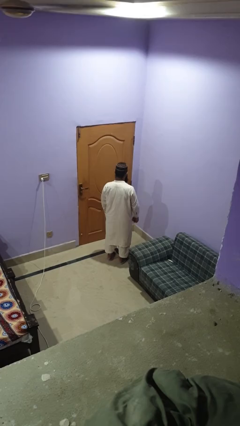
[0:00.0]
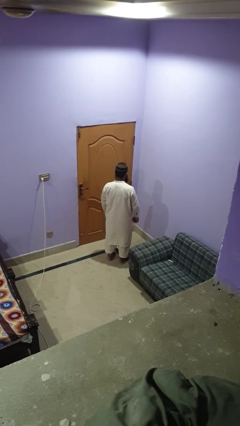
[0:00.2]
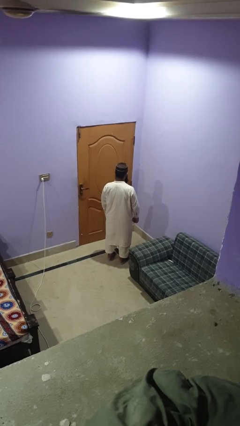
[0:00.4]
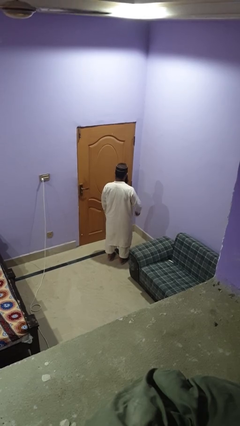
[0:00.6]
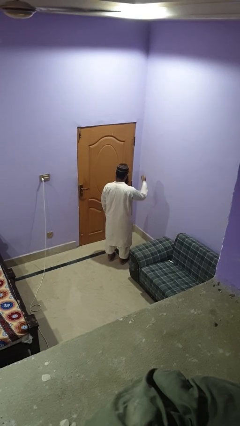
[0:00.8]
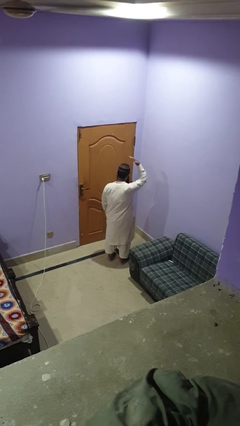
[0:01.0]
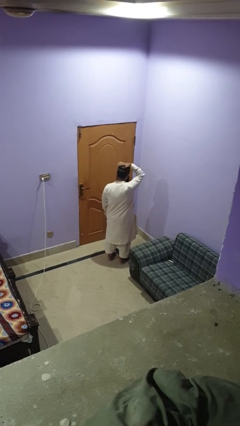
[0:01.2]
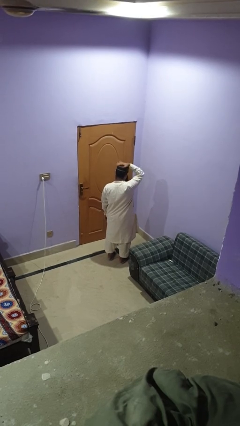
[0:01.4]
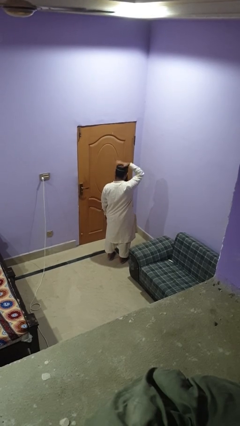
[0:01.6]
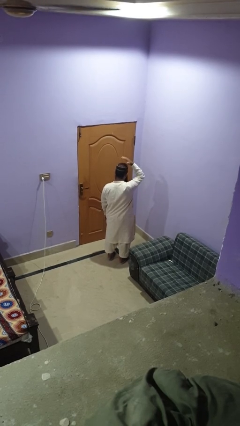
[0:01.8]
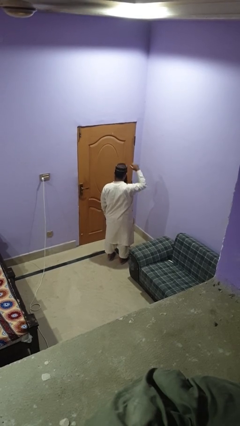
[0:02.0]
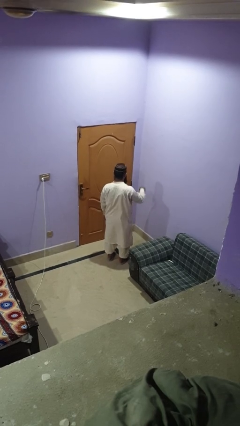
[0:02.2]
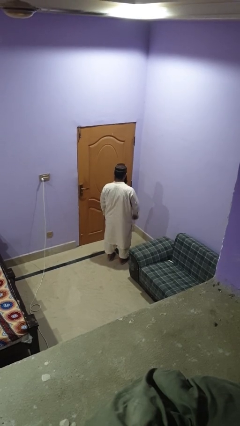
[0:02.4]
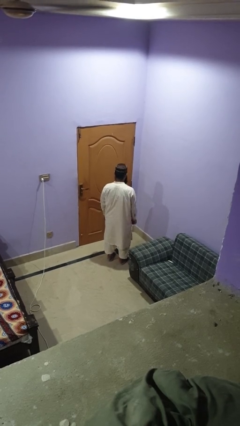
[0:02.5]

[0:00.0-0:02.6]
person pats head

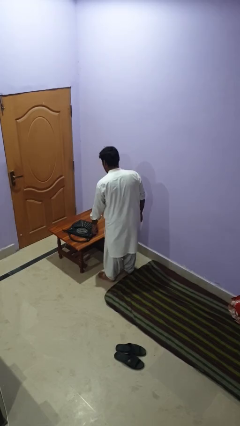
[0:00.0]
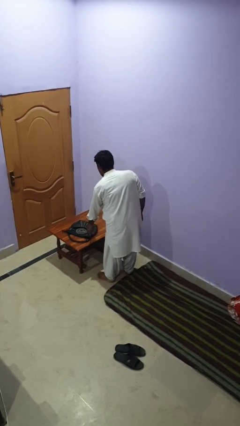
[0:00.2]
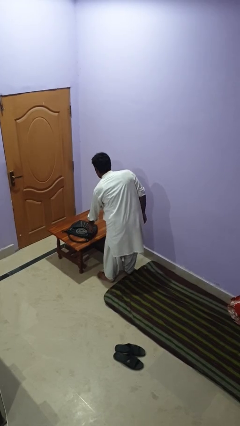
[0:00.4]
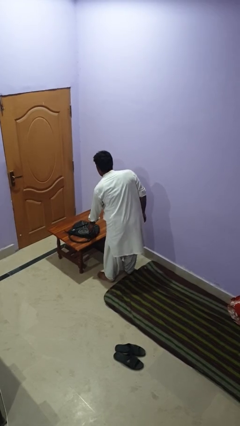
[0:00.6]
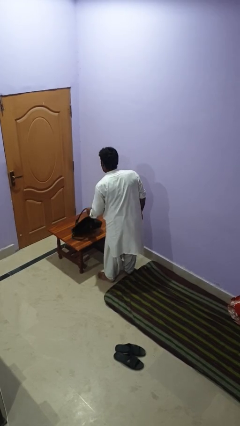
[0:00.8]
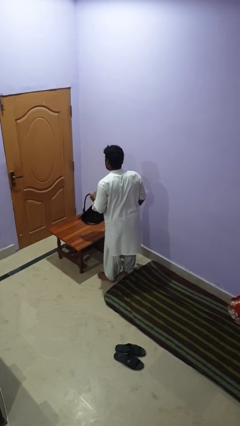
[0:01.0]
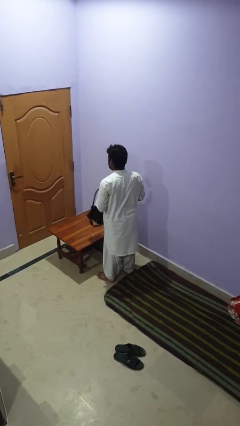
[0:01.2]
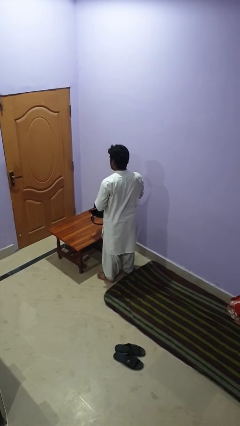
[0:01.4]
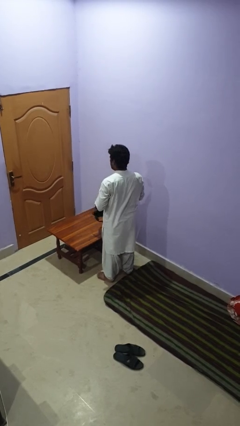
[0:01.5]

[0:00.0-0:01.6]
person picks up object from table

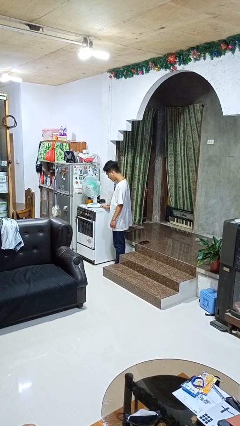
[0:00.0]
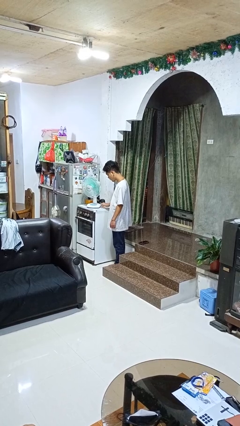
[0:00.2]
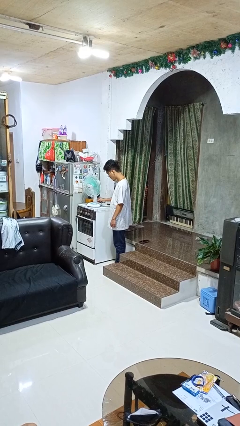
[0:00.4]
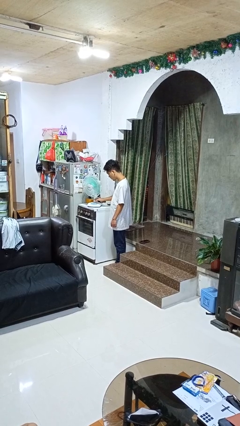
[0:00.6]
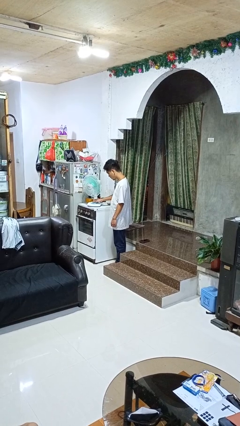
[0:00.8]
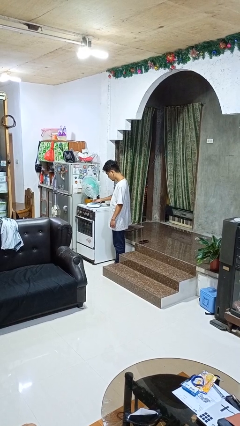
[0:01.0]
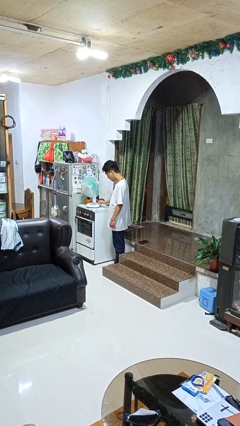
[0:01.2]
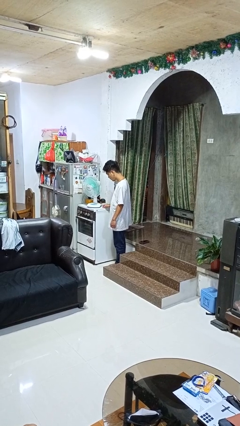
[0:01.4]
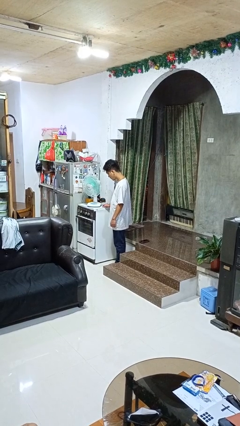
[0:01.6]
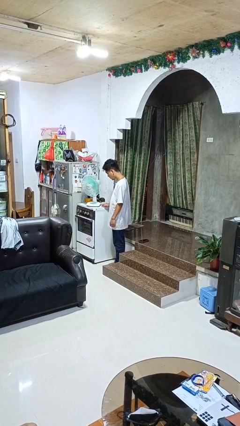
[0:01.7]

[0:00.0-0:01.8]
person turns off fan

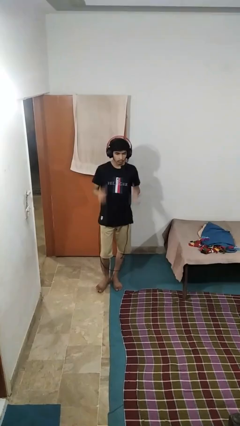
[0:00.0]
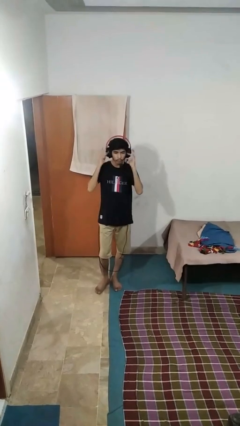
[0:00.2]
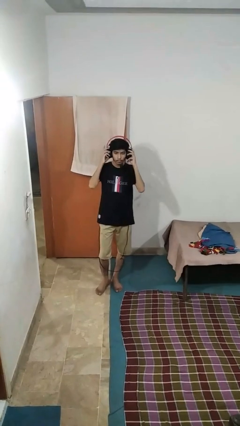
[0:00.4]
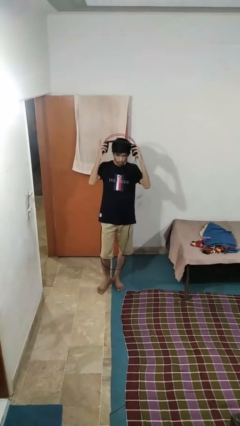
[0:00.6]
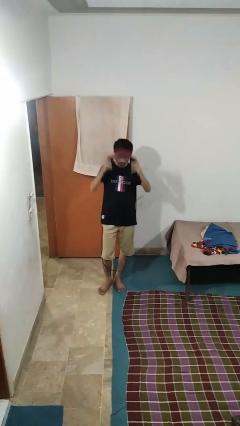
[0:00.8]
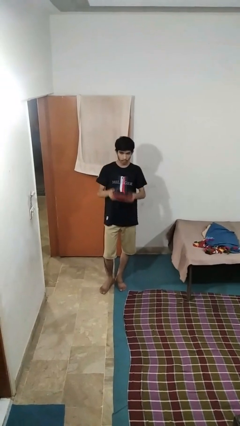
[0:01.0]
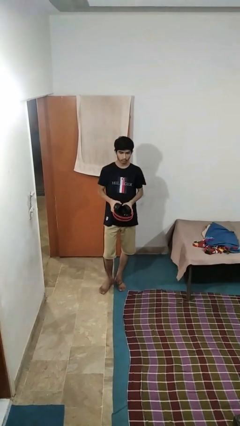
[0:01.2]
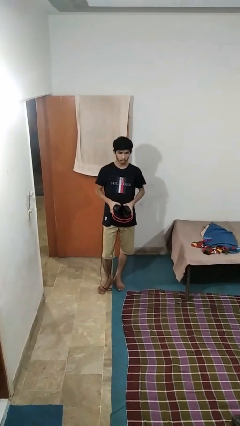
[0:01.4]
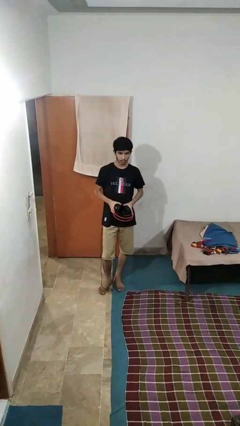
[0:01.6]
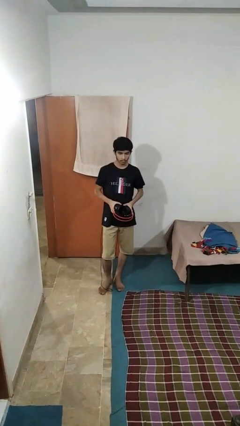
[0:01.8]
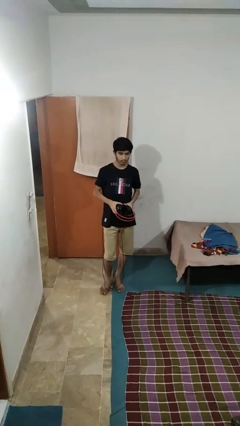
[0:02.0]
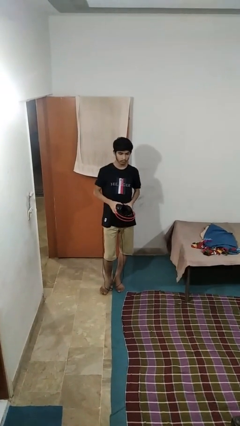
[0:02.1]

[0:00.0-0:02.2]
person takes off headphones

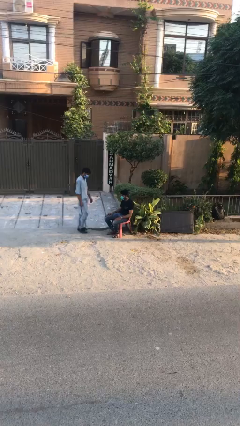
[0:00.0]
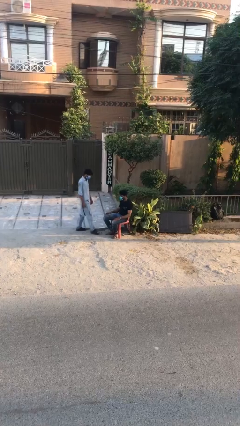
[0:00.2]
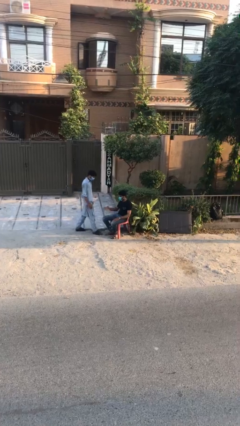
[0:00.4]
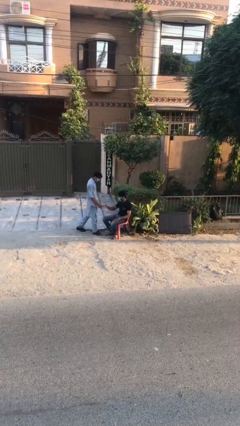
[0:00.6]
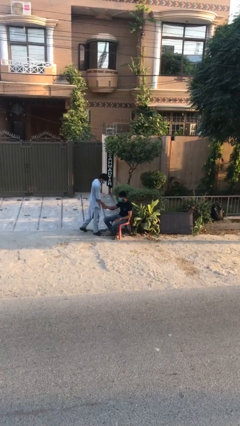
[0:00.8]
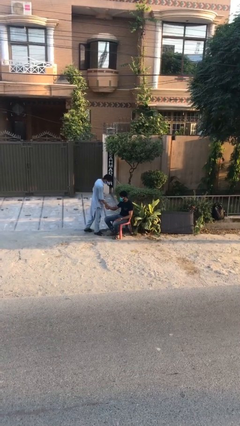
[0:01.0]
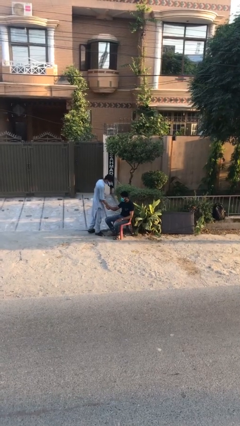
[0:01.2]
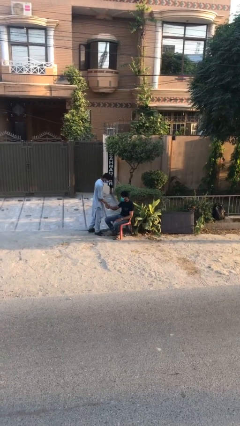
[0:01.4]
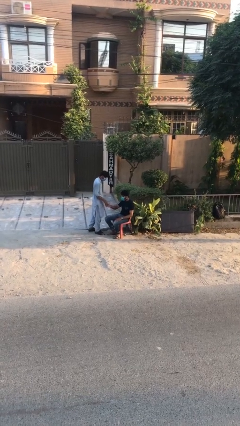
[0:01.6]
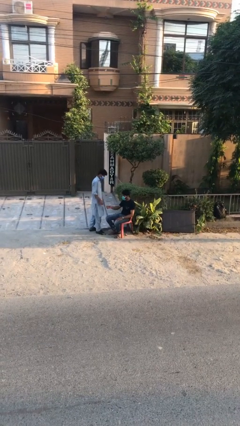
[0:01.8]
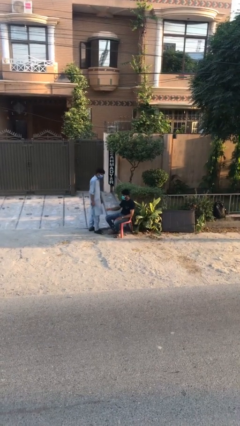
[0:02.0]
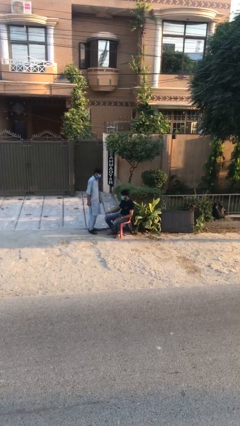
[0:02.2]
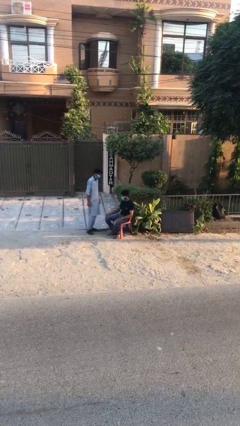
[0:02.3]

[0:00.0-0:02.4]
person shakes hand

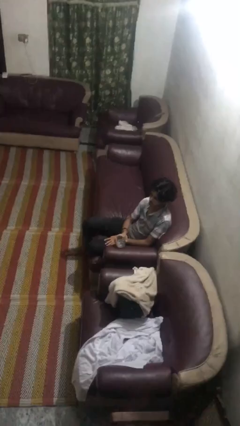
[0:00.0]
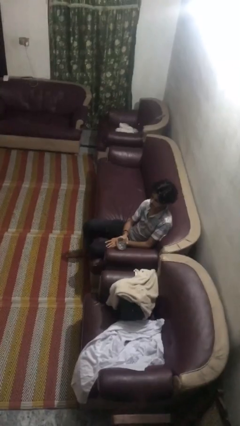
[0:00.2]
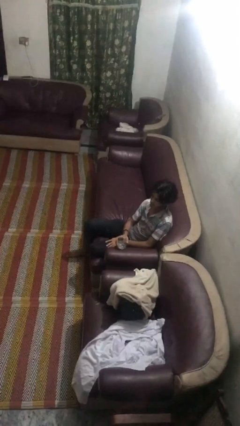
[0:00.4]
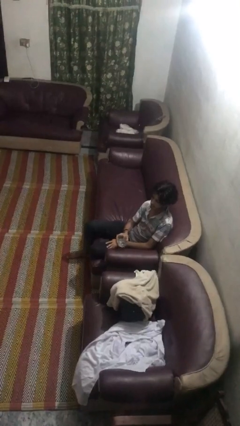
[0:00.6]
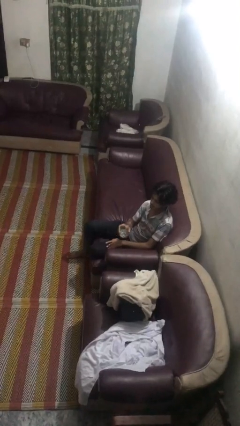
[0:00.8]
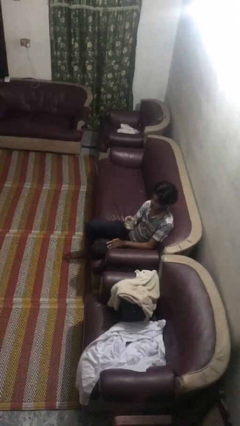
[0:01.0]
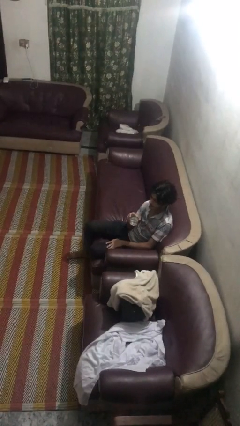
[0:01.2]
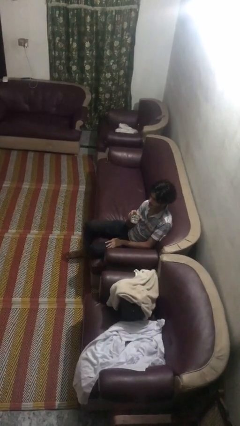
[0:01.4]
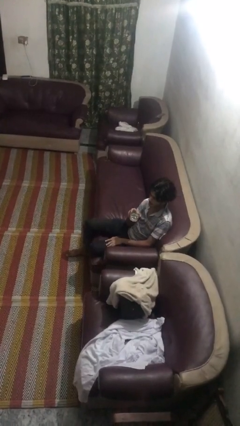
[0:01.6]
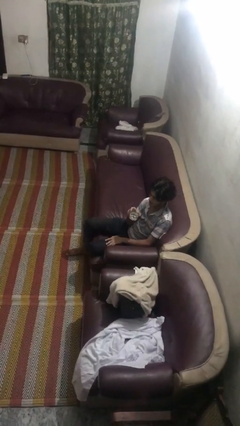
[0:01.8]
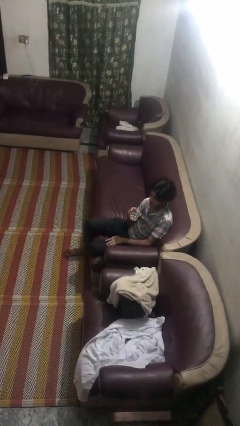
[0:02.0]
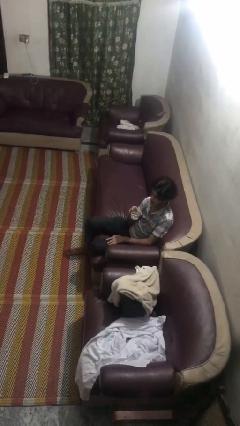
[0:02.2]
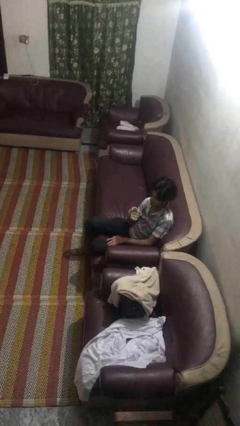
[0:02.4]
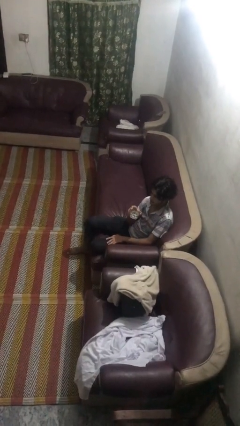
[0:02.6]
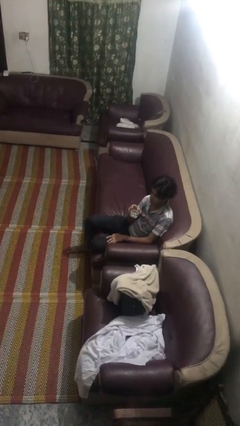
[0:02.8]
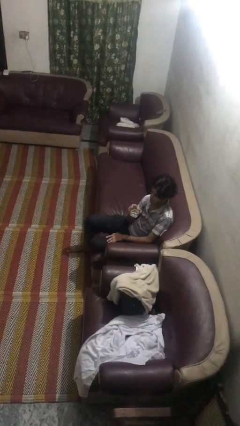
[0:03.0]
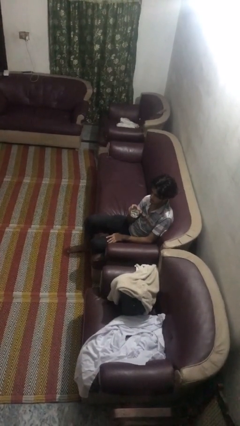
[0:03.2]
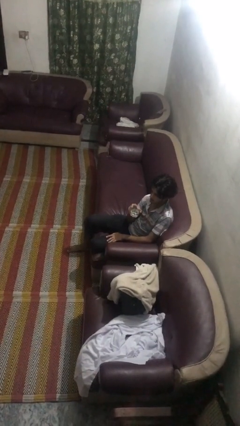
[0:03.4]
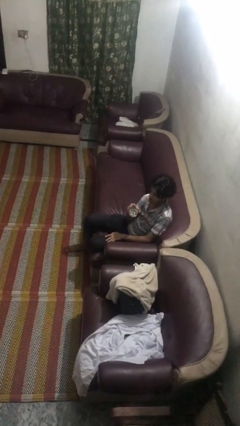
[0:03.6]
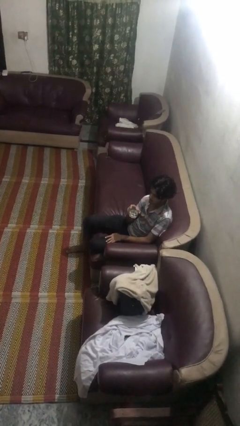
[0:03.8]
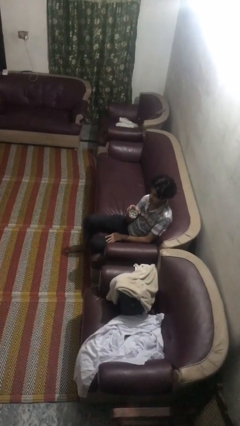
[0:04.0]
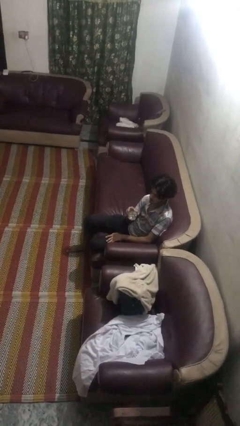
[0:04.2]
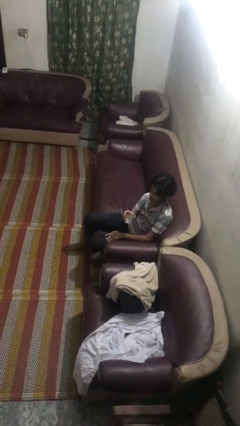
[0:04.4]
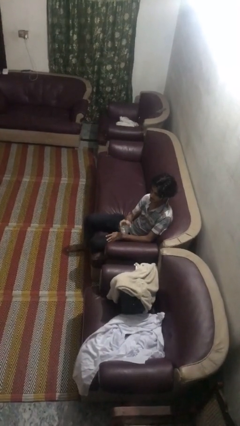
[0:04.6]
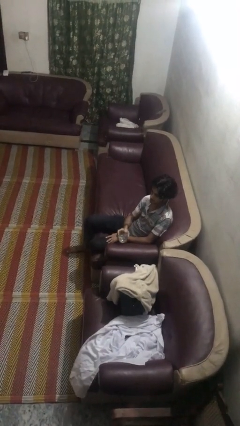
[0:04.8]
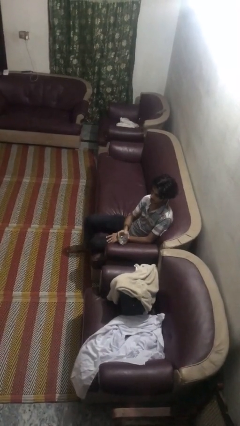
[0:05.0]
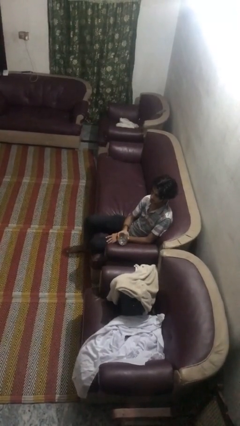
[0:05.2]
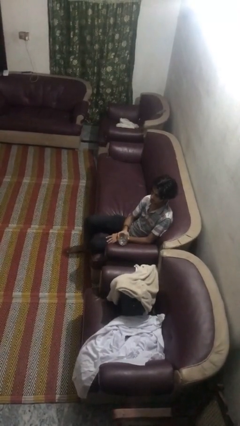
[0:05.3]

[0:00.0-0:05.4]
person drinks from straw

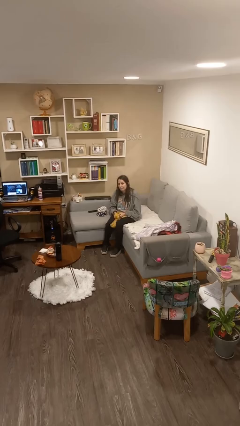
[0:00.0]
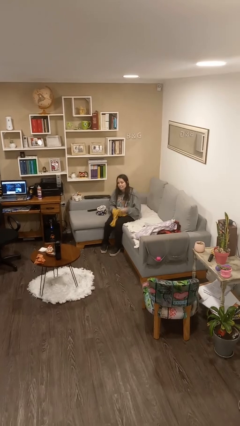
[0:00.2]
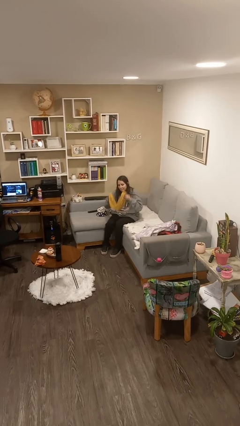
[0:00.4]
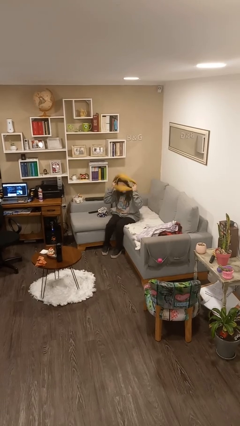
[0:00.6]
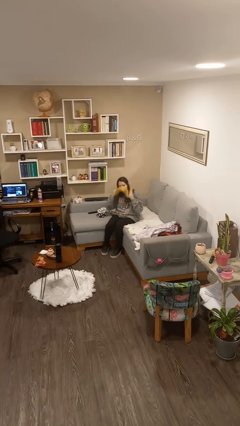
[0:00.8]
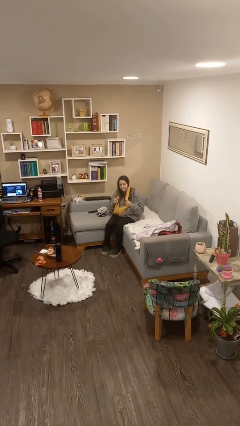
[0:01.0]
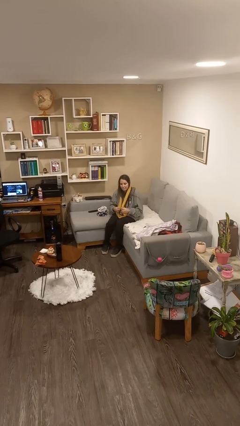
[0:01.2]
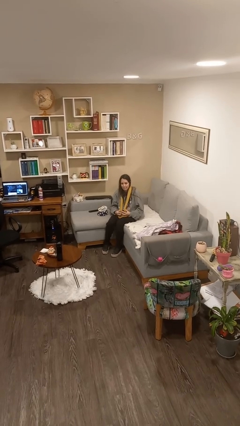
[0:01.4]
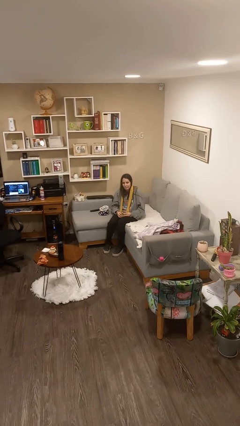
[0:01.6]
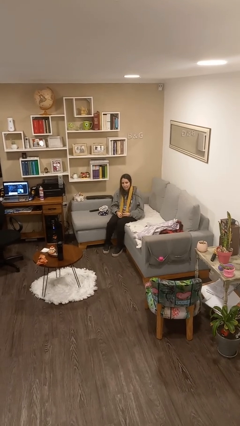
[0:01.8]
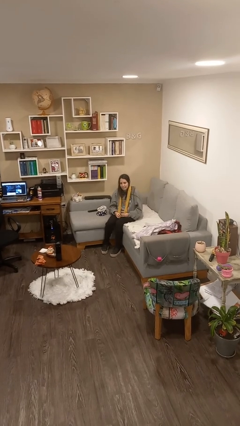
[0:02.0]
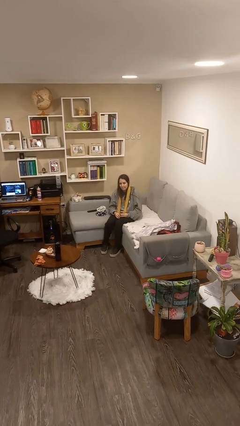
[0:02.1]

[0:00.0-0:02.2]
person puts on scarf
